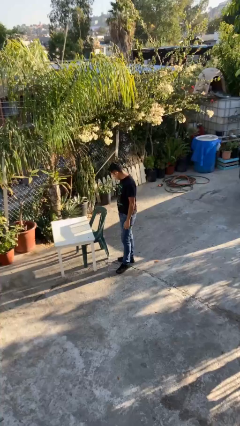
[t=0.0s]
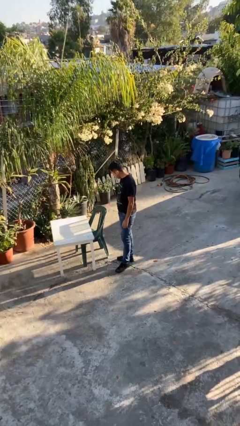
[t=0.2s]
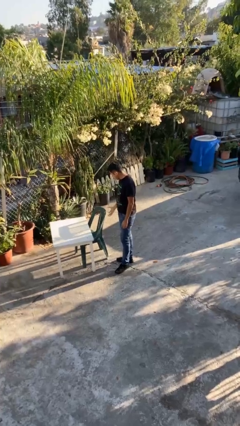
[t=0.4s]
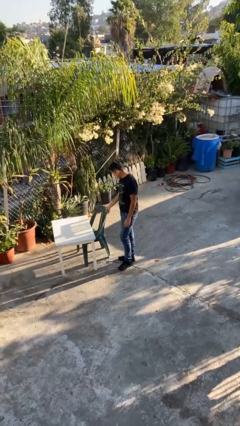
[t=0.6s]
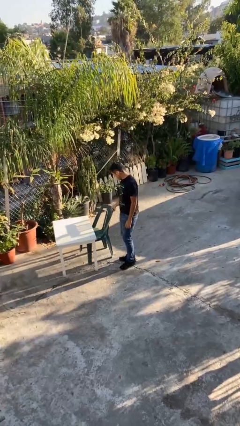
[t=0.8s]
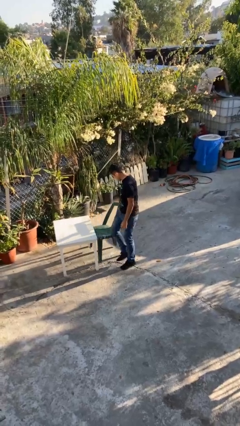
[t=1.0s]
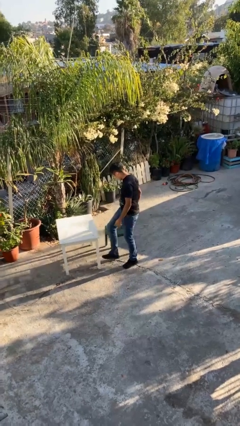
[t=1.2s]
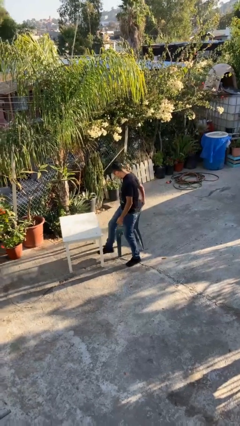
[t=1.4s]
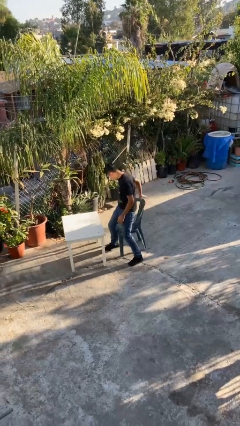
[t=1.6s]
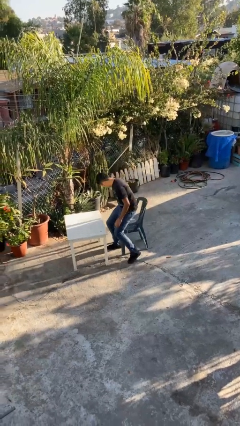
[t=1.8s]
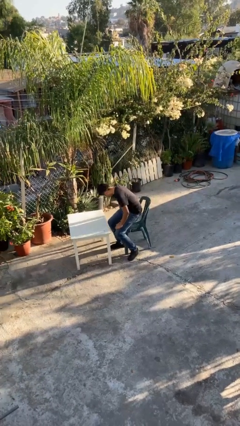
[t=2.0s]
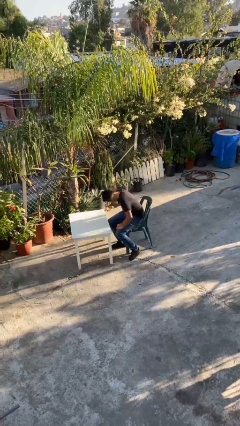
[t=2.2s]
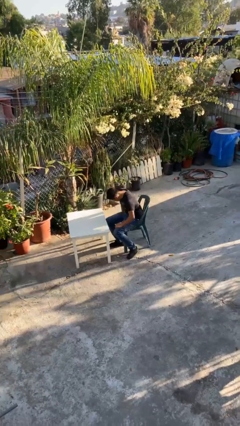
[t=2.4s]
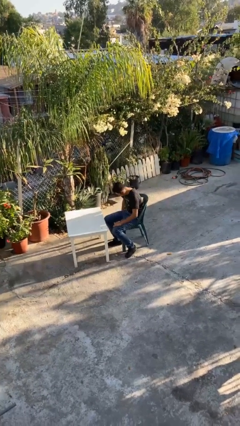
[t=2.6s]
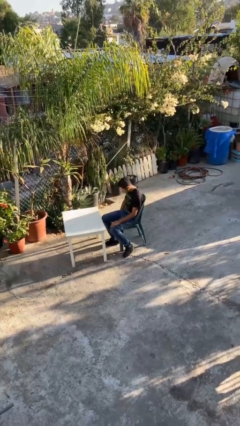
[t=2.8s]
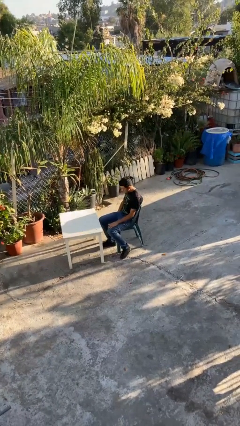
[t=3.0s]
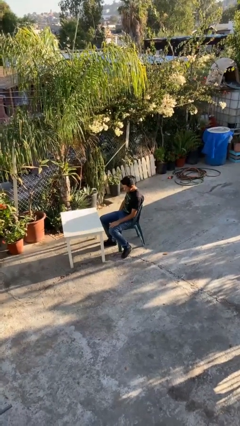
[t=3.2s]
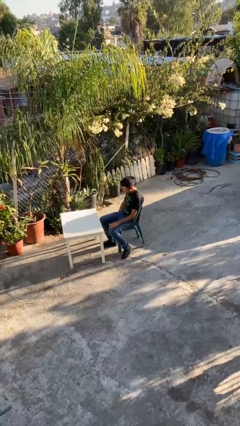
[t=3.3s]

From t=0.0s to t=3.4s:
person sits down

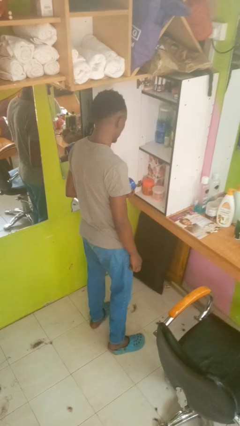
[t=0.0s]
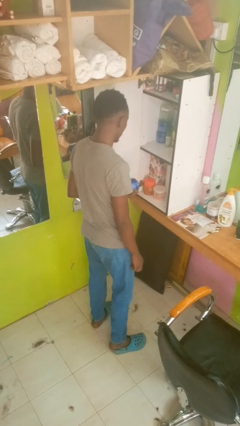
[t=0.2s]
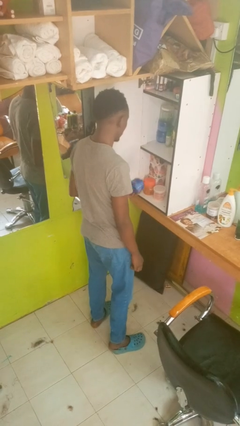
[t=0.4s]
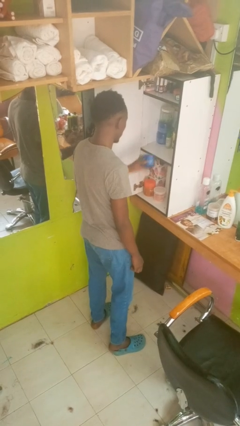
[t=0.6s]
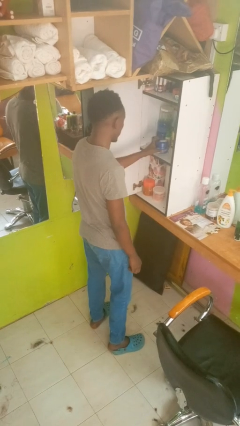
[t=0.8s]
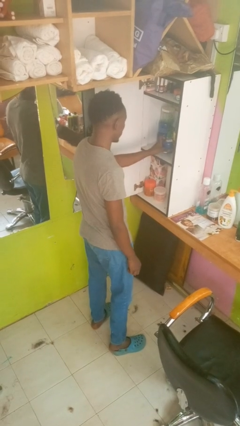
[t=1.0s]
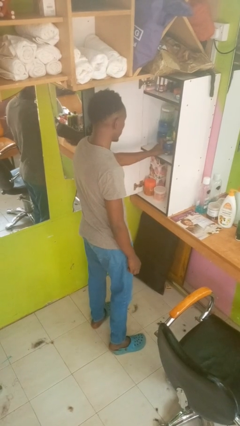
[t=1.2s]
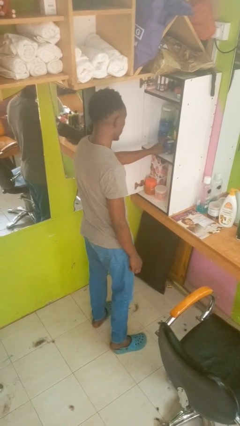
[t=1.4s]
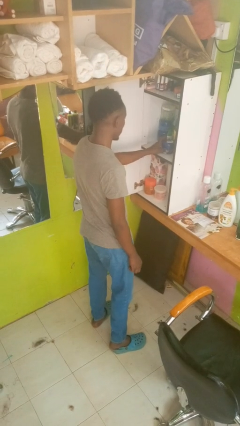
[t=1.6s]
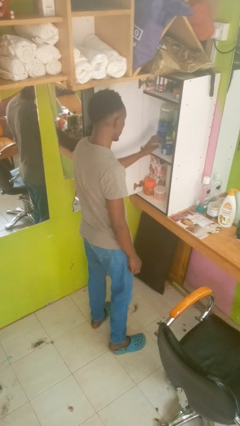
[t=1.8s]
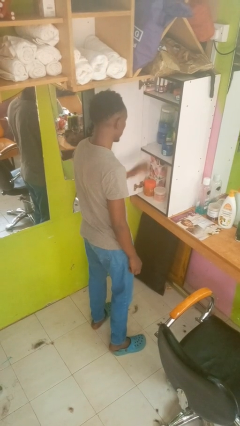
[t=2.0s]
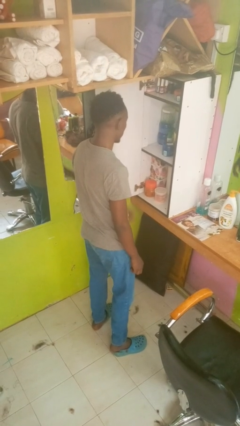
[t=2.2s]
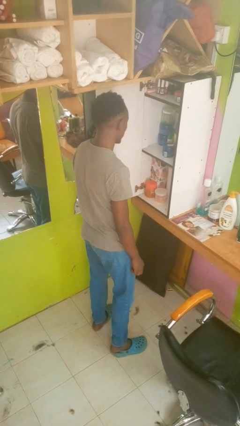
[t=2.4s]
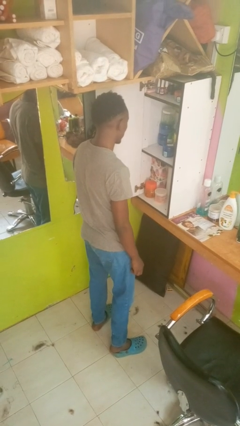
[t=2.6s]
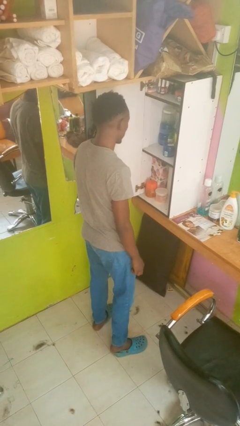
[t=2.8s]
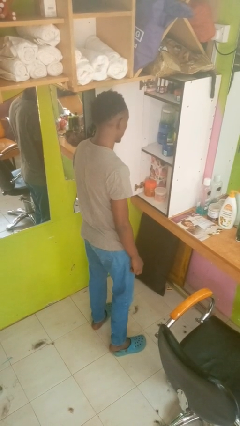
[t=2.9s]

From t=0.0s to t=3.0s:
person puts down object into cabinet

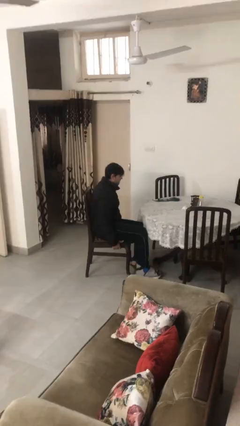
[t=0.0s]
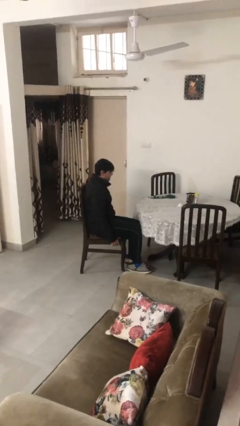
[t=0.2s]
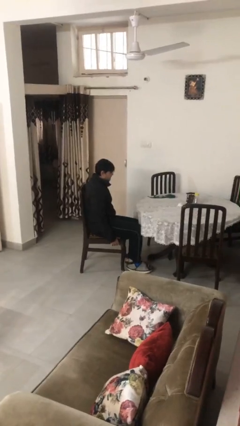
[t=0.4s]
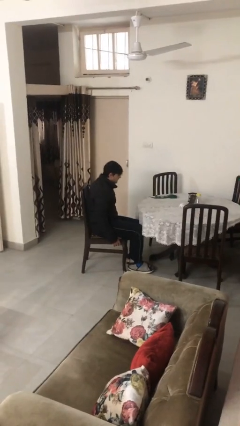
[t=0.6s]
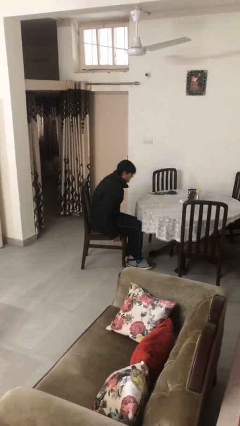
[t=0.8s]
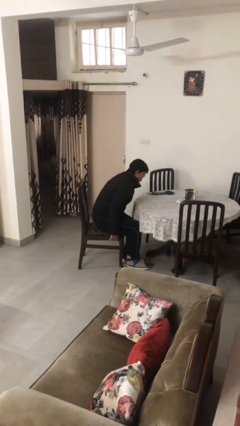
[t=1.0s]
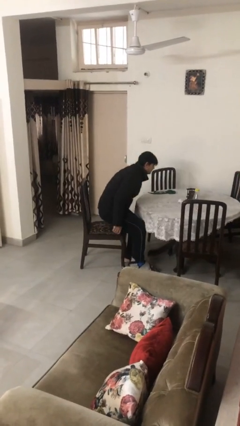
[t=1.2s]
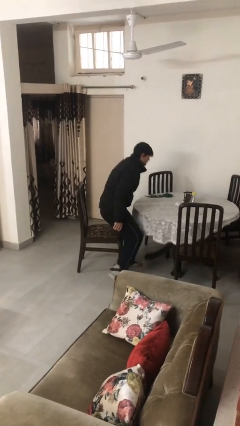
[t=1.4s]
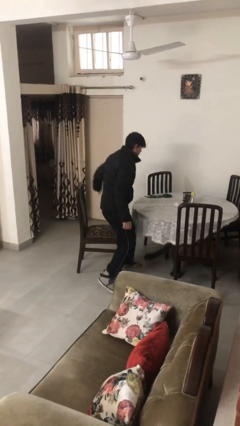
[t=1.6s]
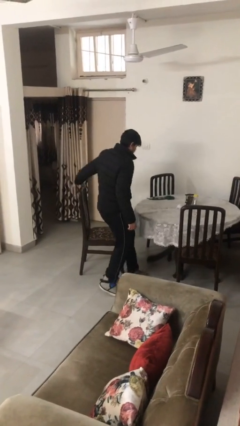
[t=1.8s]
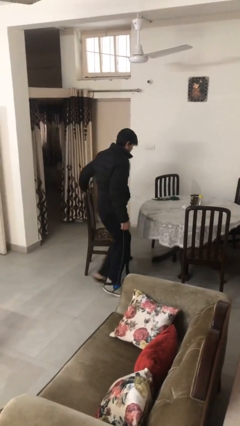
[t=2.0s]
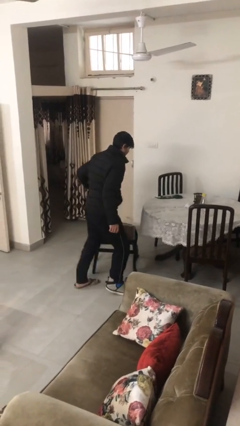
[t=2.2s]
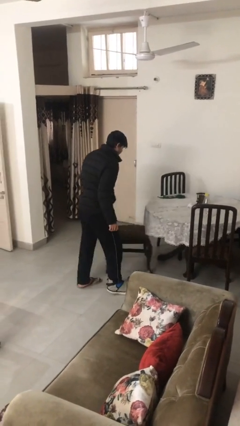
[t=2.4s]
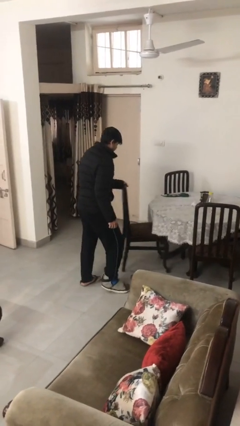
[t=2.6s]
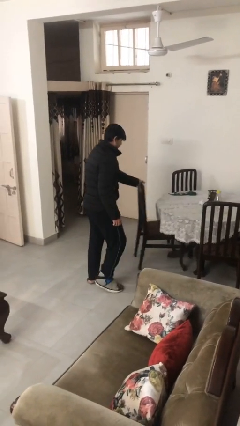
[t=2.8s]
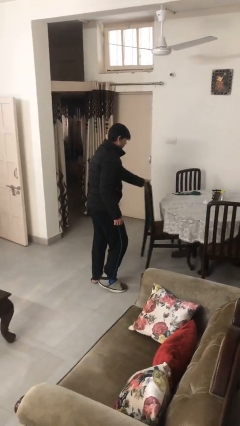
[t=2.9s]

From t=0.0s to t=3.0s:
person stands up

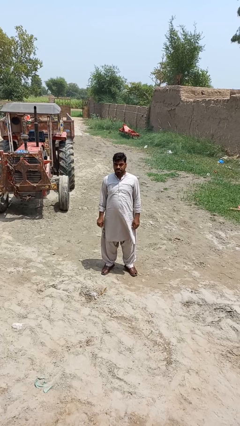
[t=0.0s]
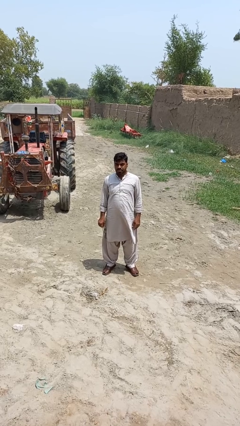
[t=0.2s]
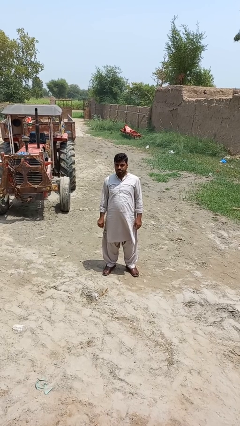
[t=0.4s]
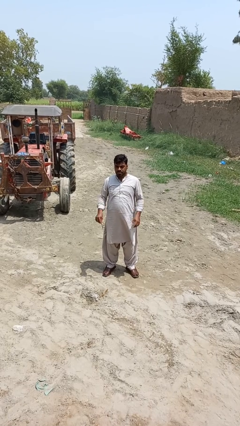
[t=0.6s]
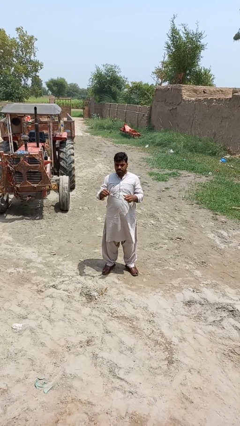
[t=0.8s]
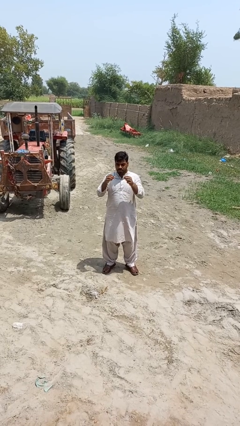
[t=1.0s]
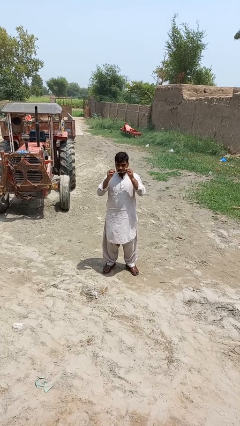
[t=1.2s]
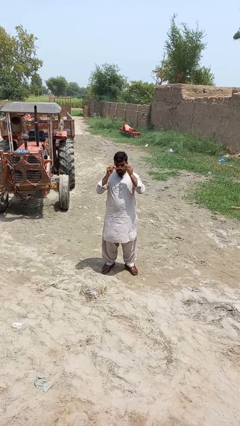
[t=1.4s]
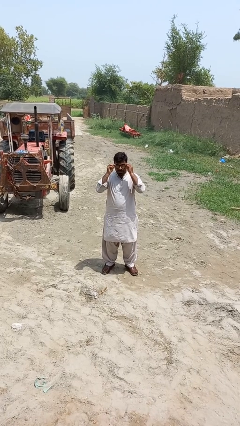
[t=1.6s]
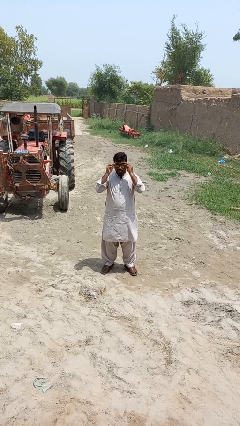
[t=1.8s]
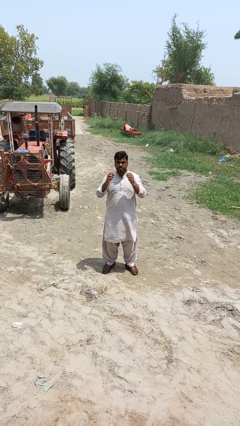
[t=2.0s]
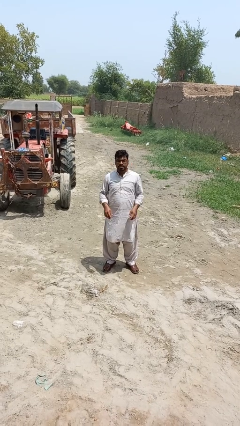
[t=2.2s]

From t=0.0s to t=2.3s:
person puts on glasses

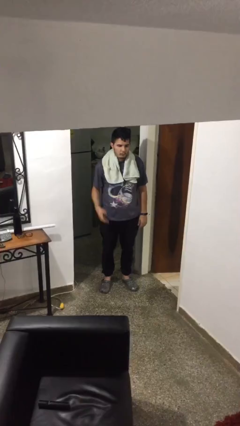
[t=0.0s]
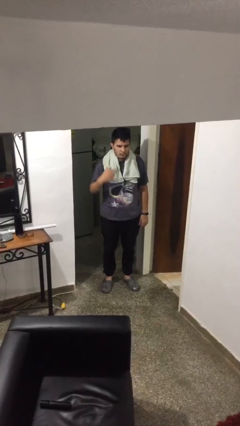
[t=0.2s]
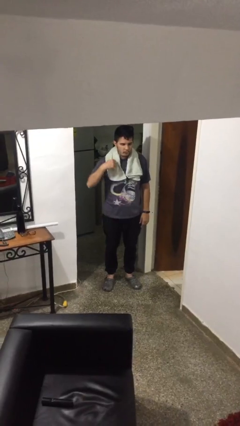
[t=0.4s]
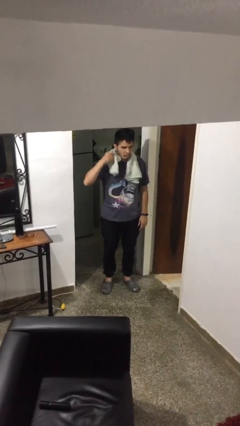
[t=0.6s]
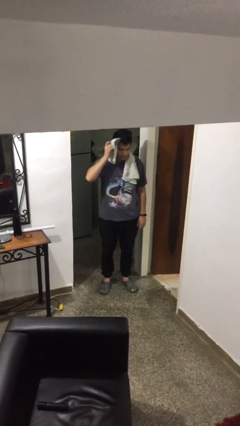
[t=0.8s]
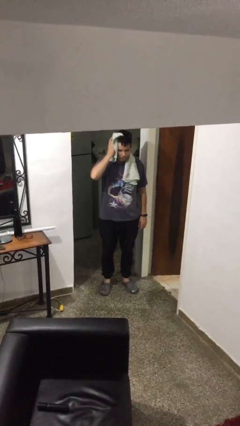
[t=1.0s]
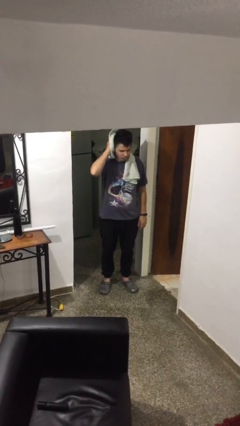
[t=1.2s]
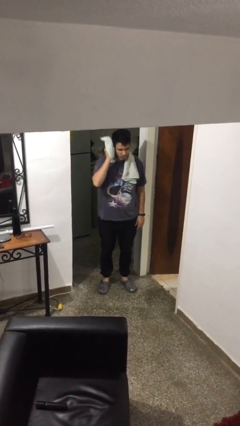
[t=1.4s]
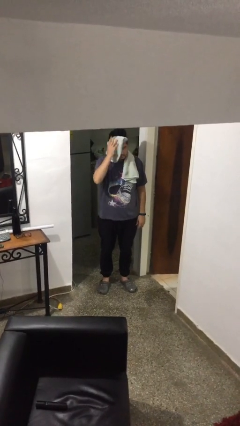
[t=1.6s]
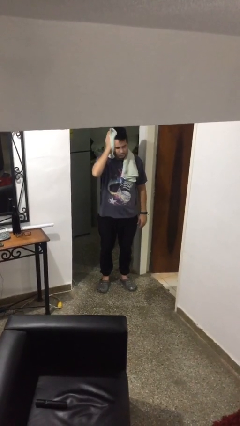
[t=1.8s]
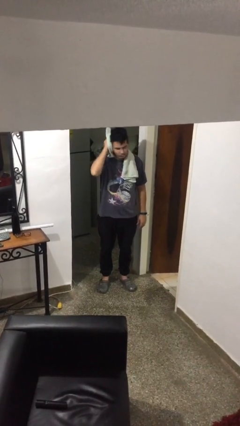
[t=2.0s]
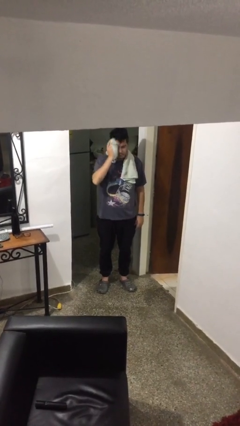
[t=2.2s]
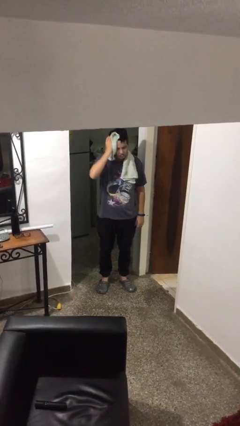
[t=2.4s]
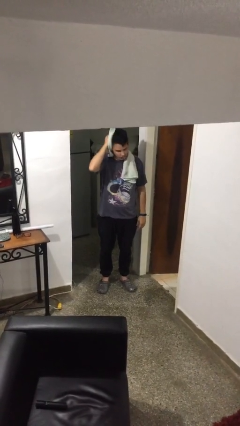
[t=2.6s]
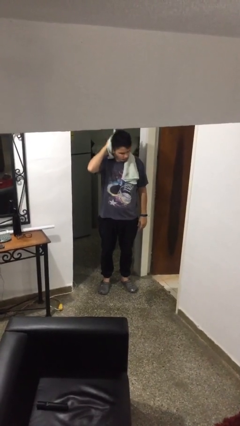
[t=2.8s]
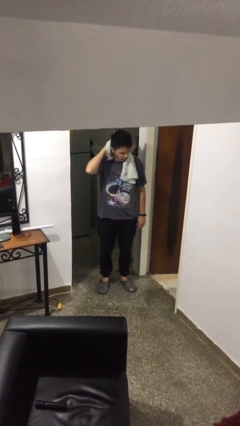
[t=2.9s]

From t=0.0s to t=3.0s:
person dries hair with towel

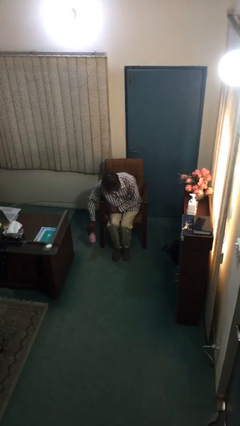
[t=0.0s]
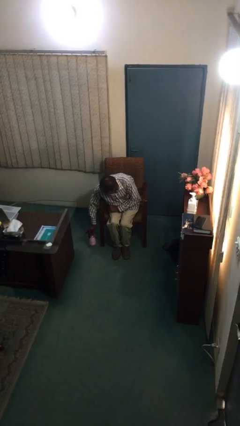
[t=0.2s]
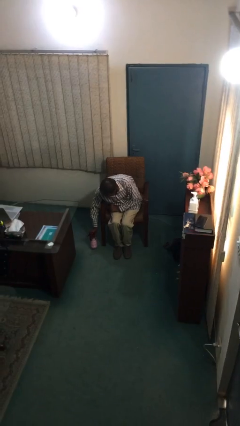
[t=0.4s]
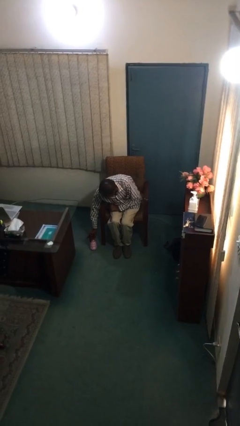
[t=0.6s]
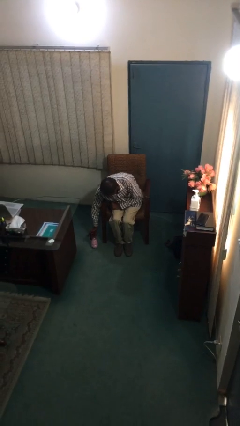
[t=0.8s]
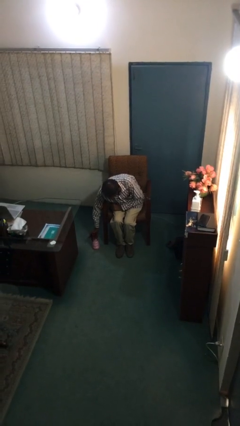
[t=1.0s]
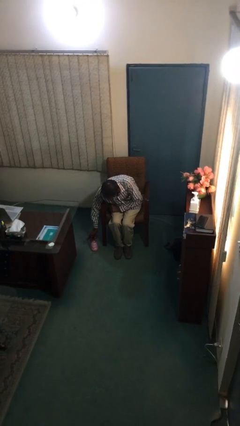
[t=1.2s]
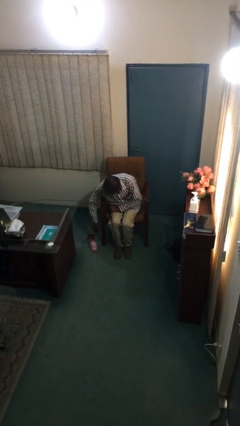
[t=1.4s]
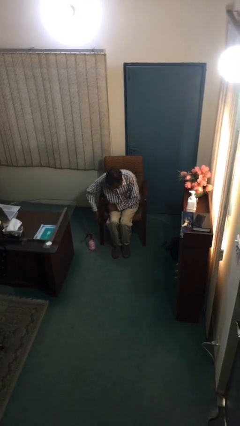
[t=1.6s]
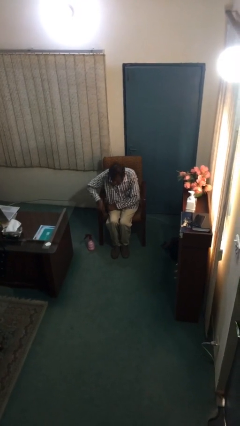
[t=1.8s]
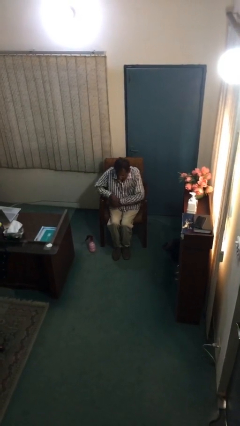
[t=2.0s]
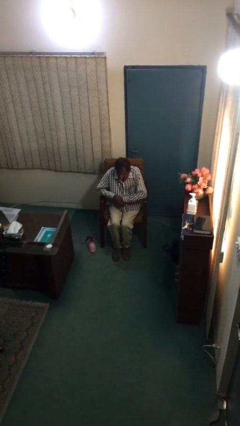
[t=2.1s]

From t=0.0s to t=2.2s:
person puts down object on floor

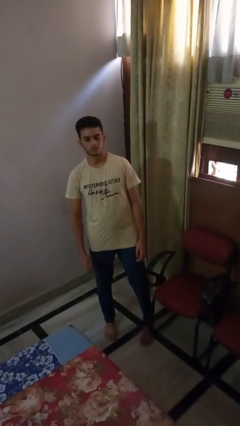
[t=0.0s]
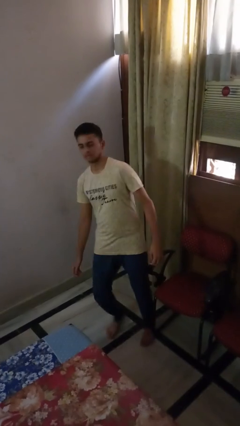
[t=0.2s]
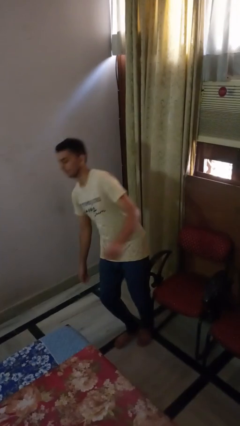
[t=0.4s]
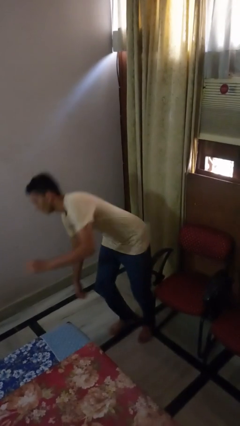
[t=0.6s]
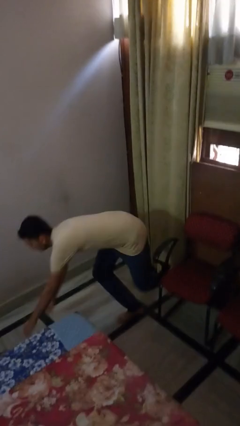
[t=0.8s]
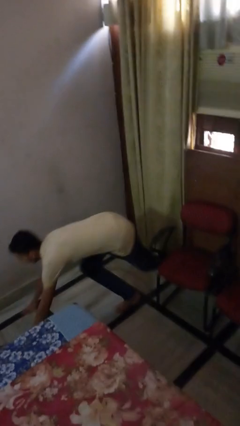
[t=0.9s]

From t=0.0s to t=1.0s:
person trips on object on floor
